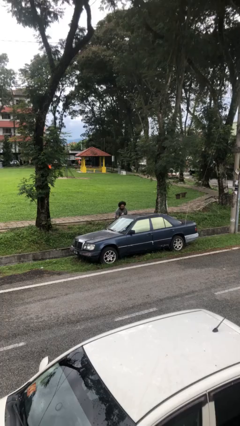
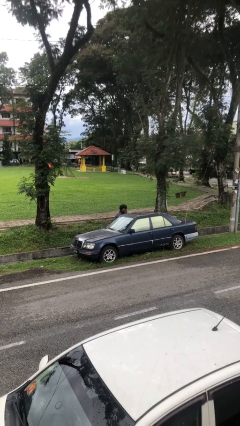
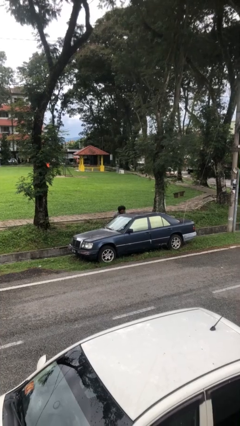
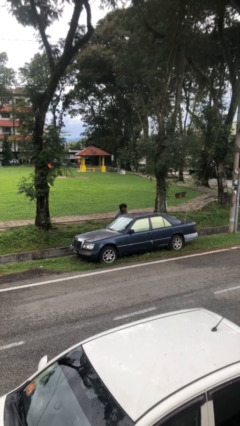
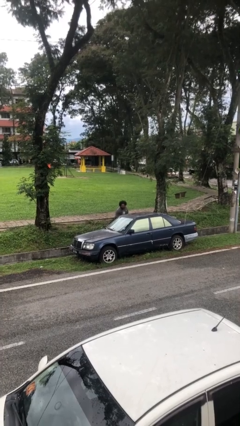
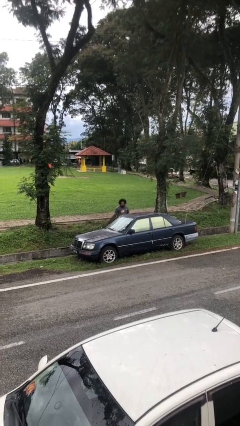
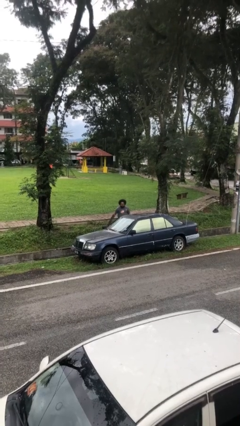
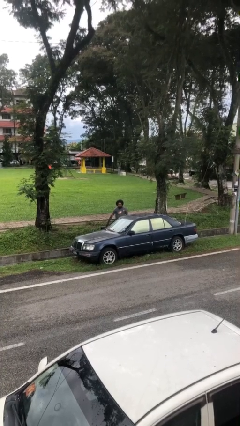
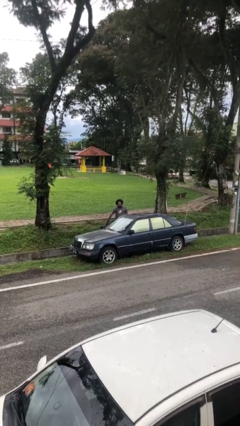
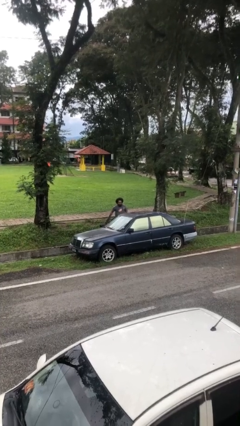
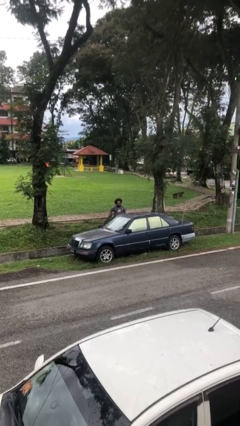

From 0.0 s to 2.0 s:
person opens car door

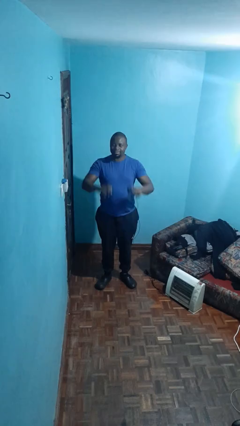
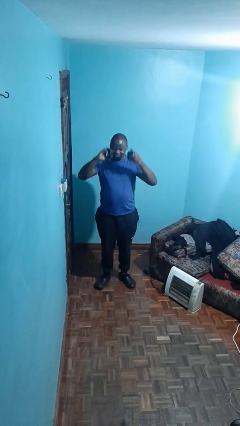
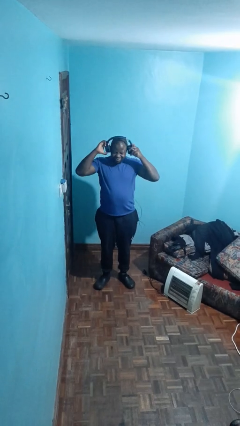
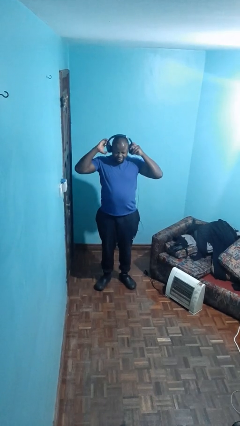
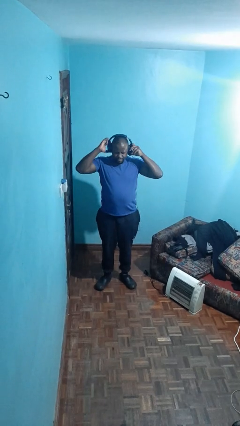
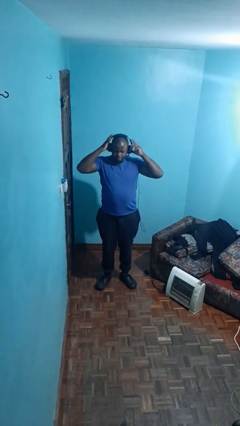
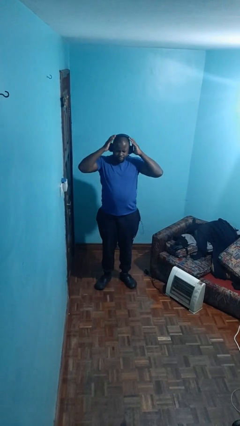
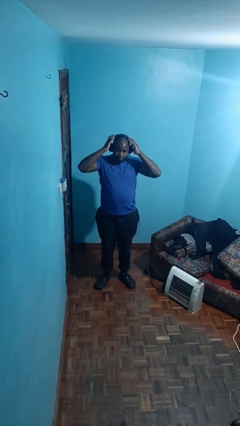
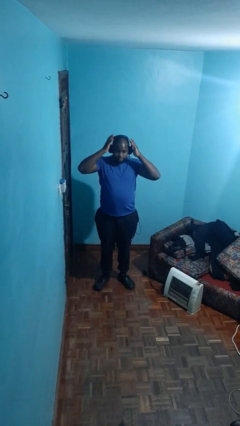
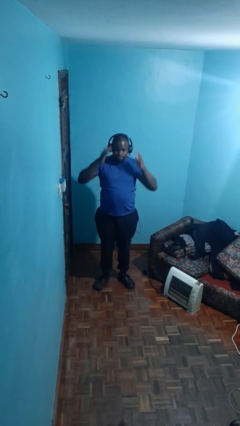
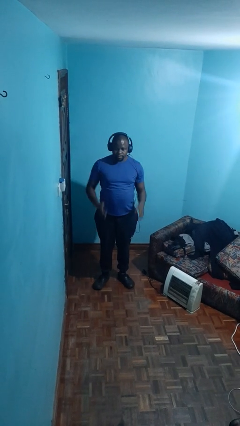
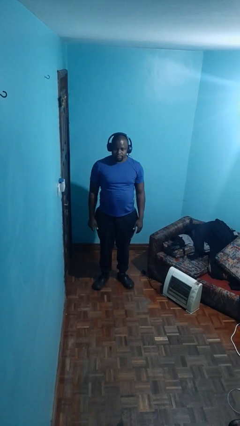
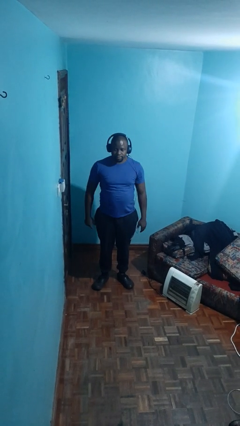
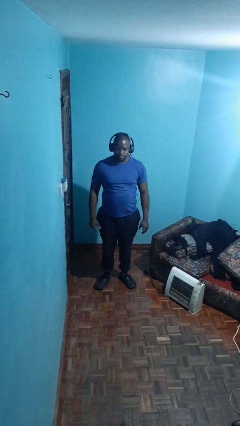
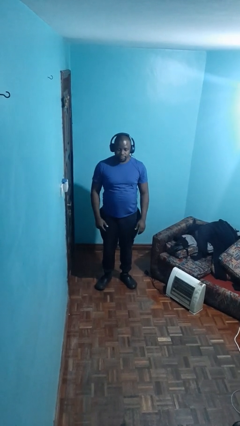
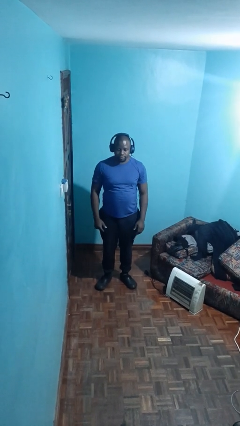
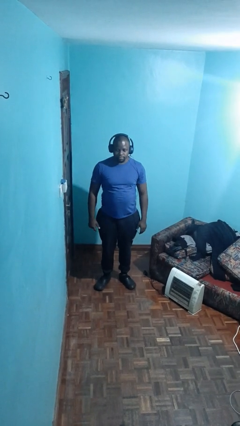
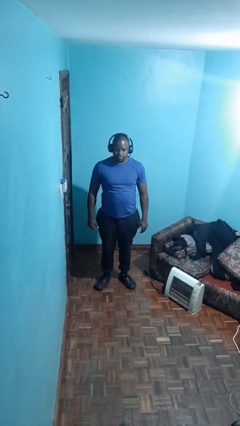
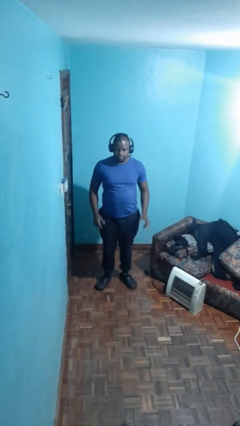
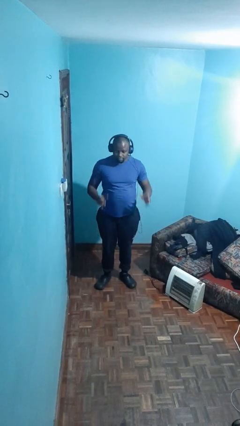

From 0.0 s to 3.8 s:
person puts on headphones

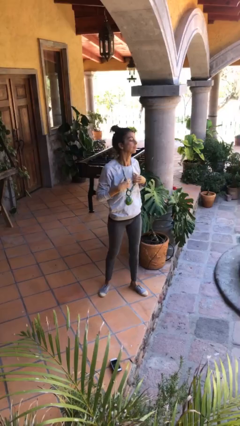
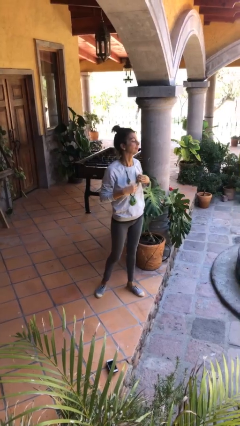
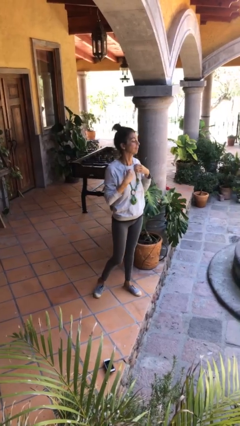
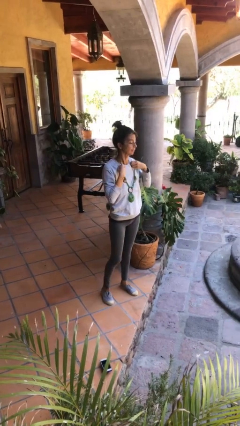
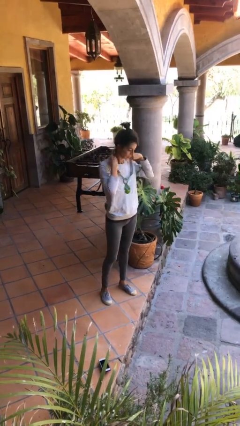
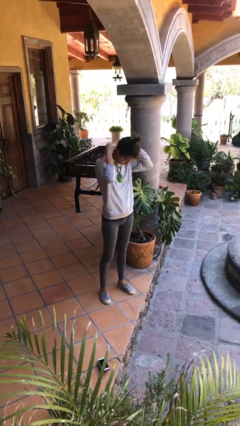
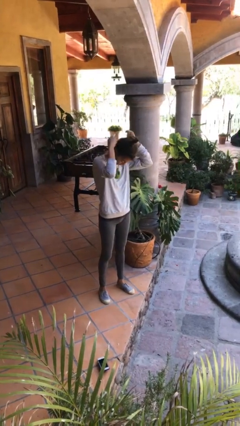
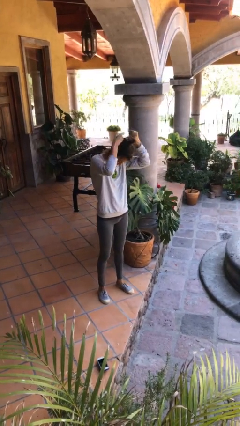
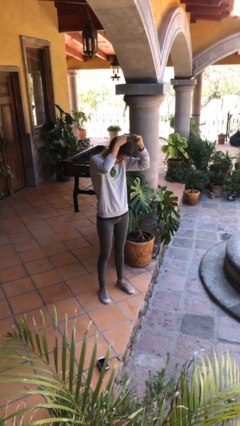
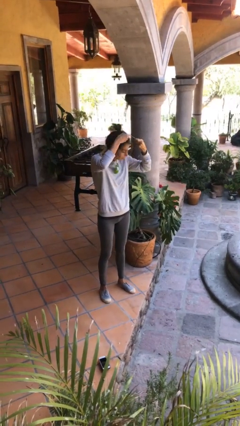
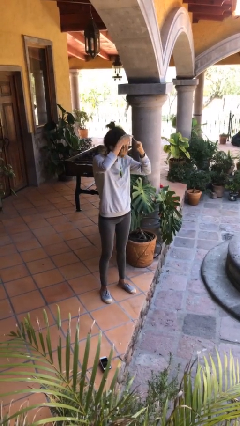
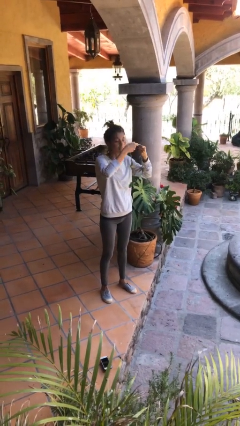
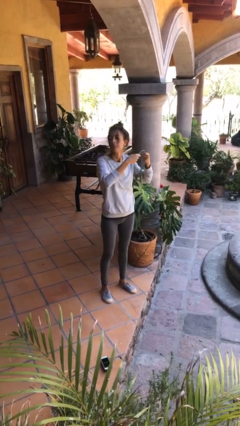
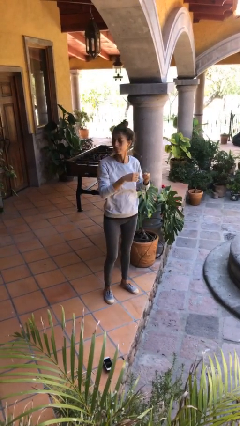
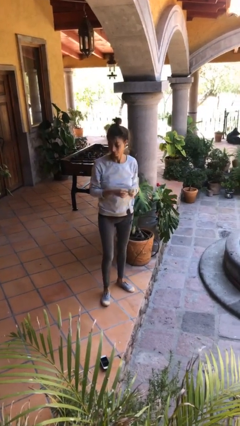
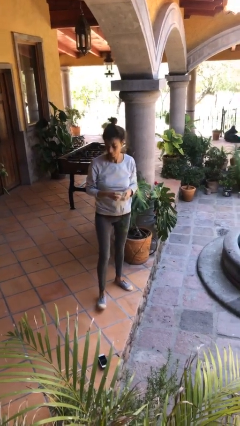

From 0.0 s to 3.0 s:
person takes off necklace

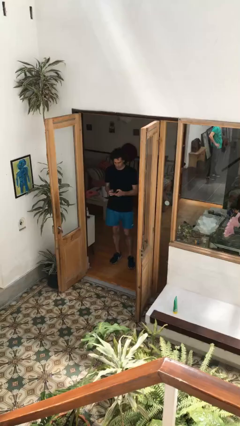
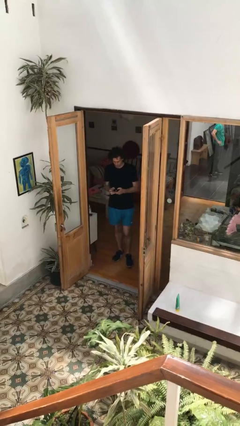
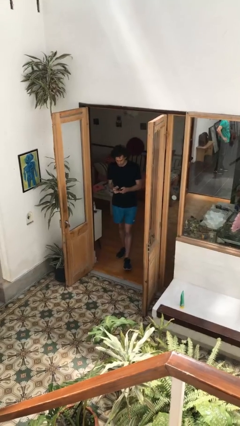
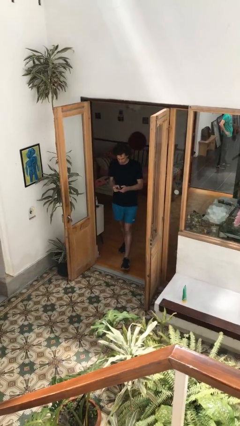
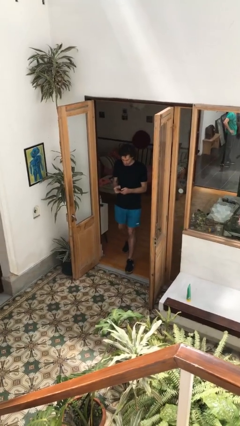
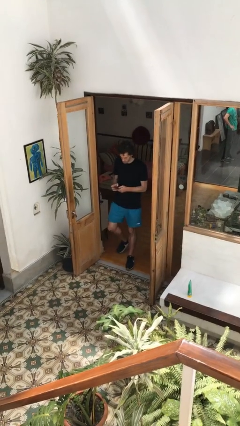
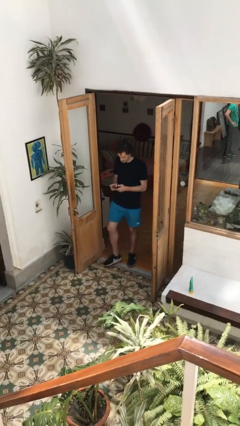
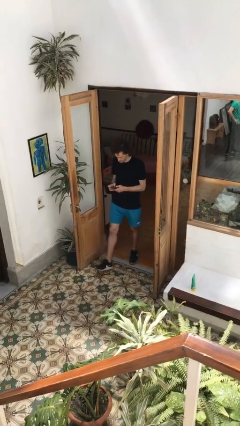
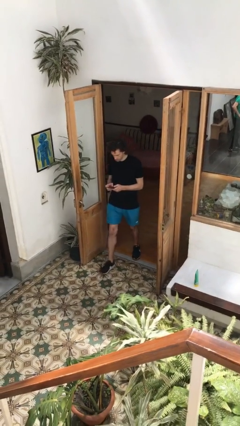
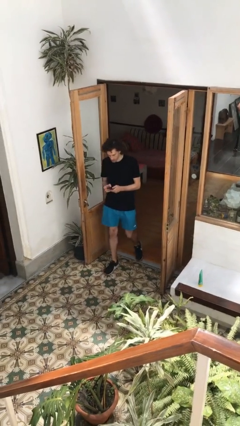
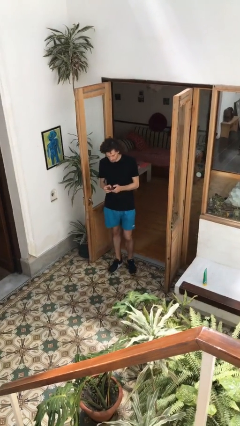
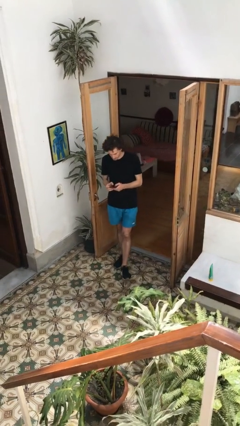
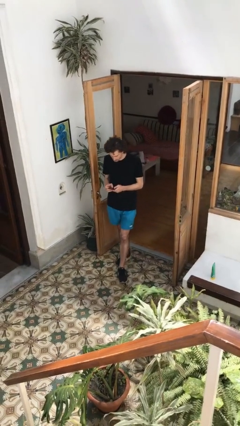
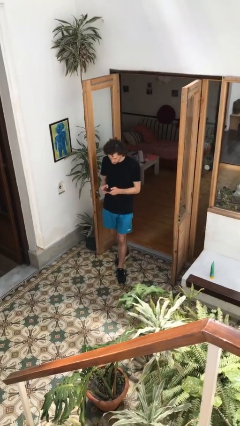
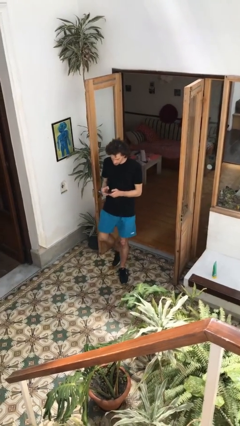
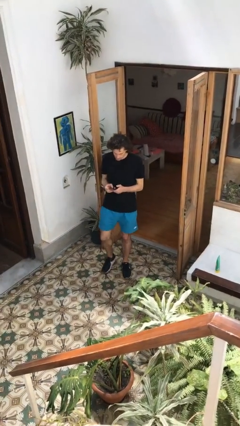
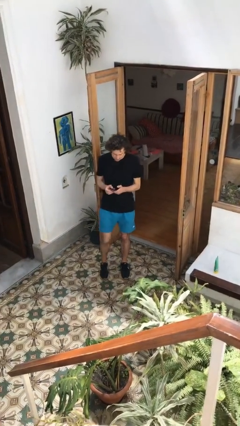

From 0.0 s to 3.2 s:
person enters scene through structure

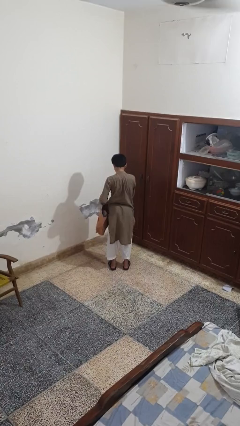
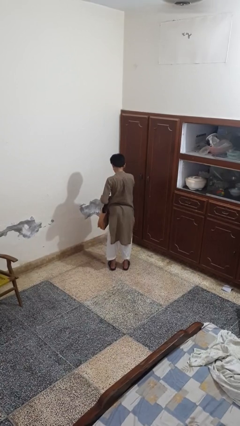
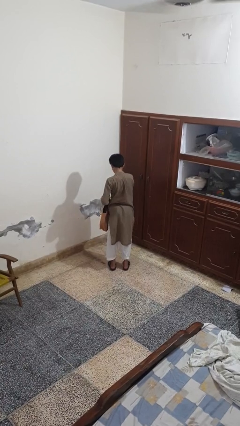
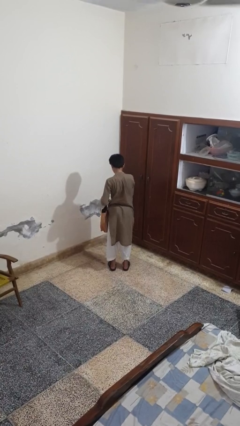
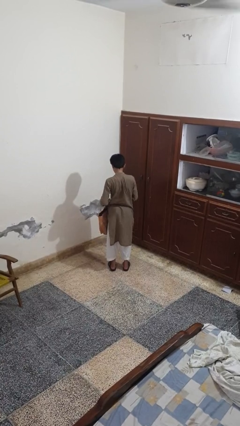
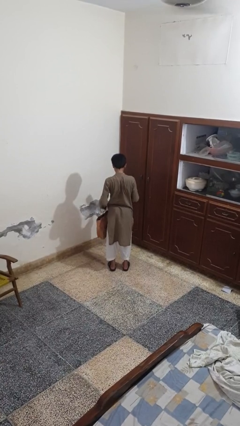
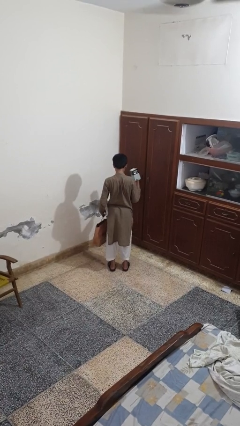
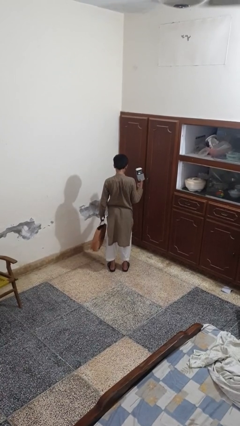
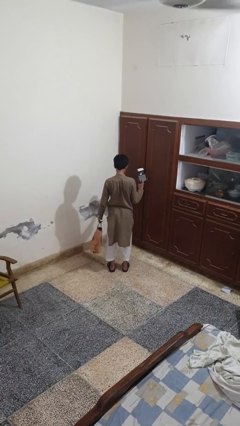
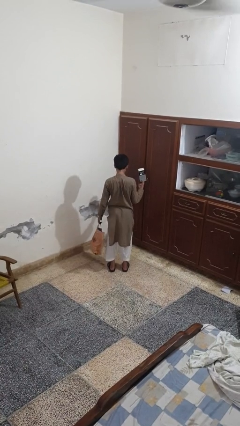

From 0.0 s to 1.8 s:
person takes object from bag

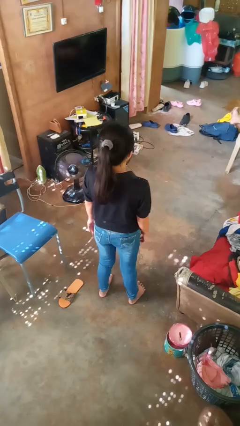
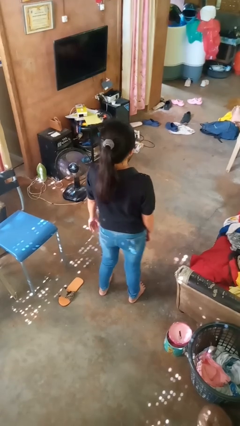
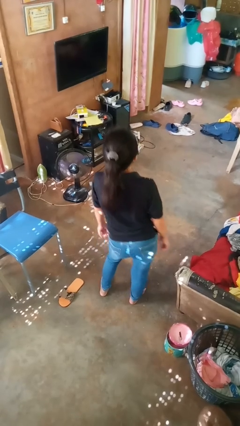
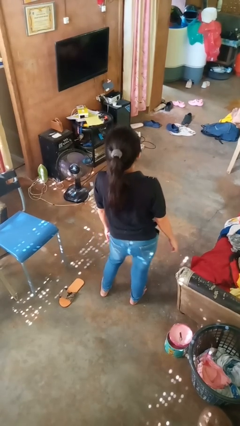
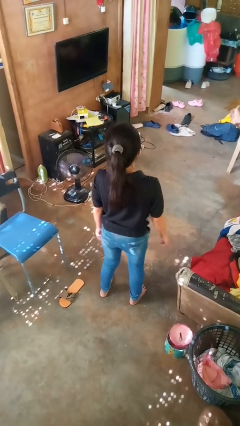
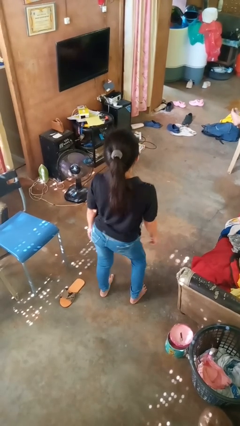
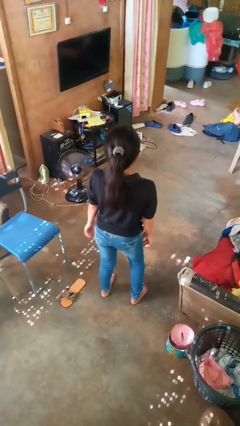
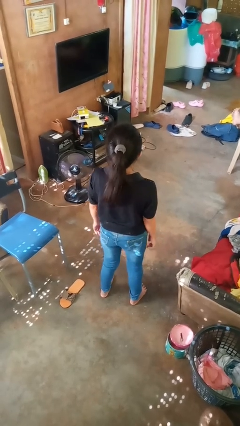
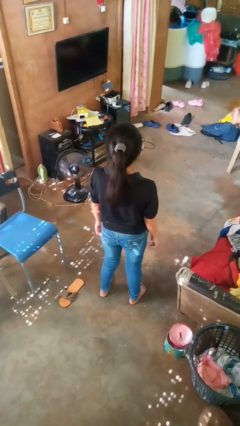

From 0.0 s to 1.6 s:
person wiggles hips

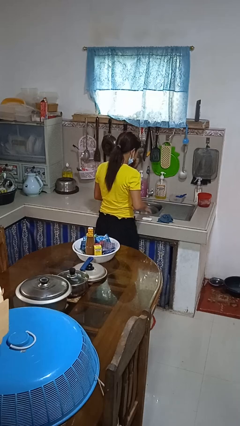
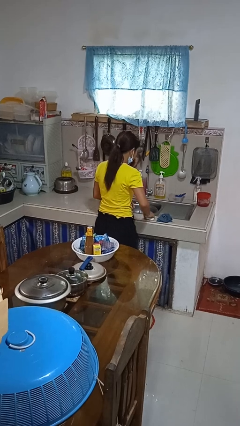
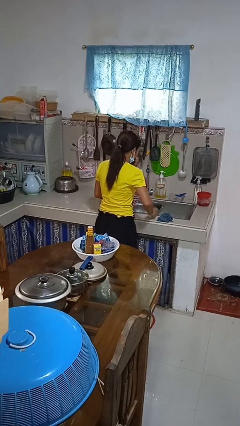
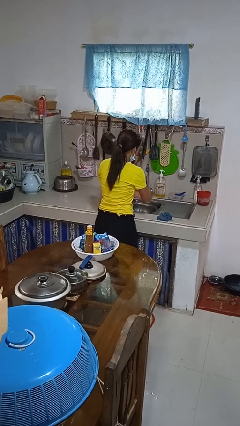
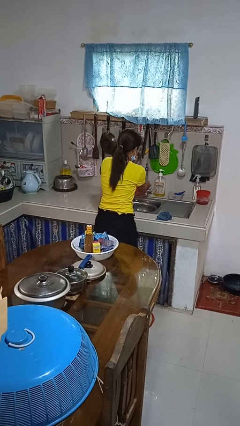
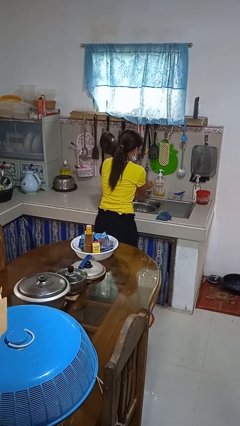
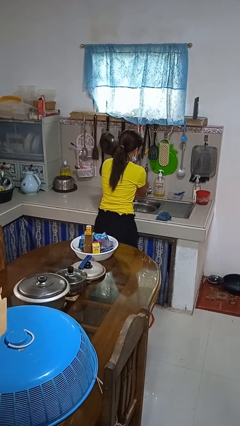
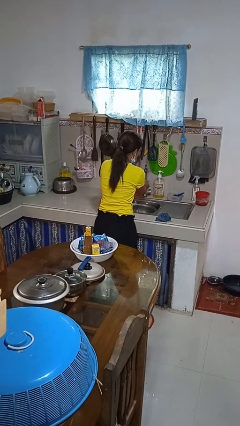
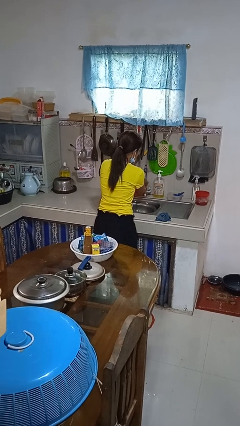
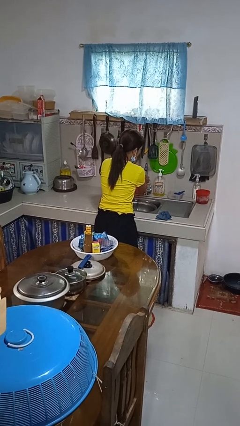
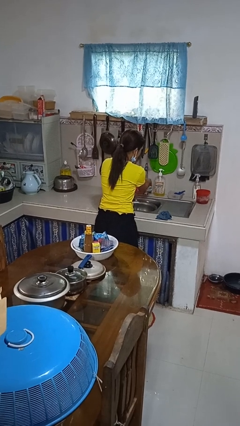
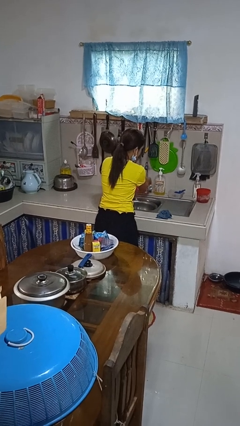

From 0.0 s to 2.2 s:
person washes hands
